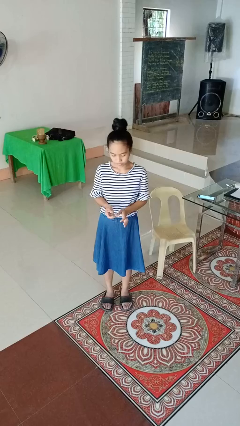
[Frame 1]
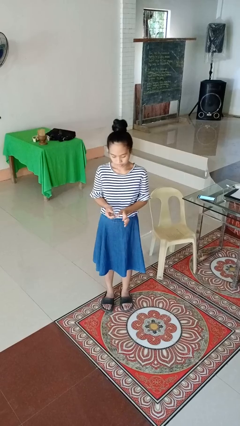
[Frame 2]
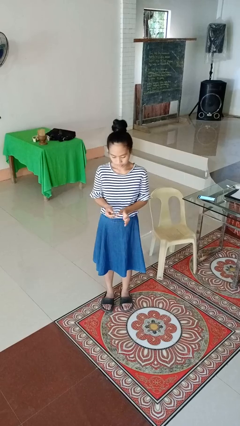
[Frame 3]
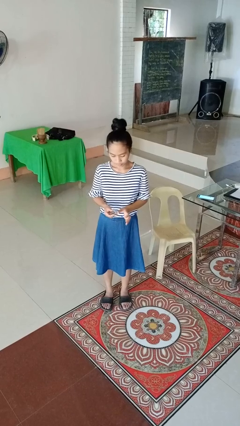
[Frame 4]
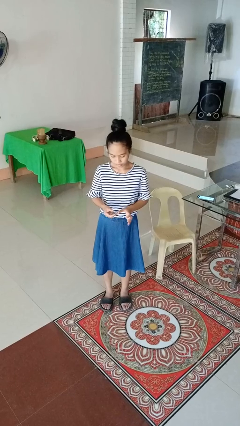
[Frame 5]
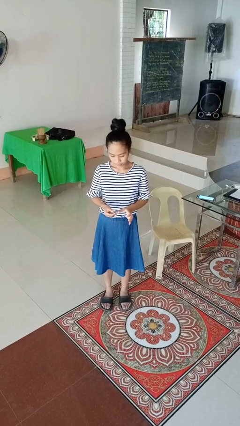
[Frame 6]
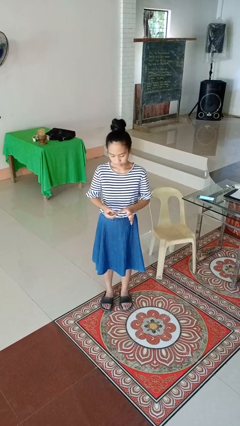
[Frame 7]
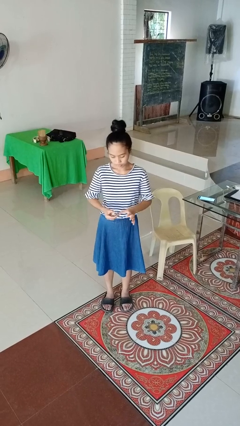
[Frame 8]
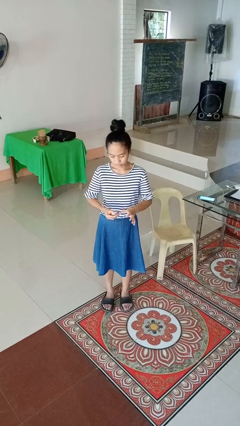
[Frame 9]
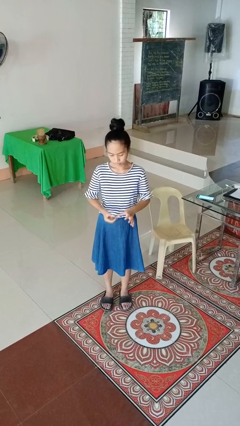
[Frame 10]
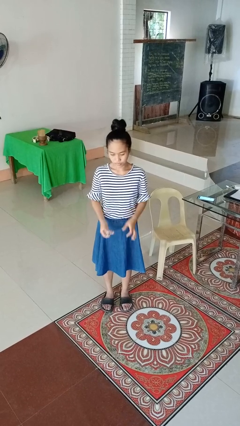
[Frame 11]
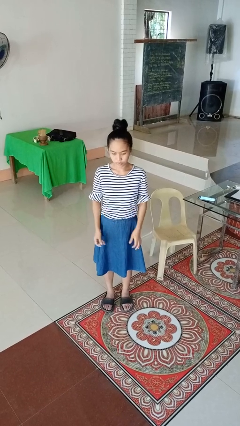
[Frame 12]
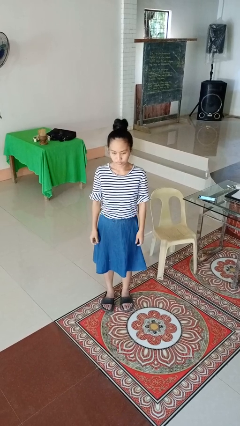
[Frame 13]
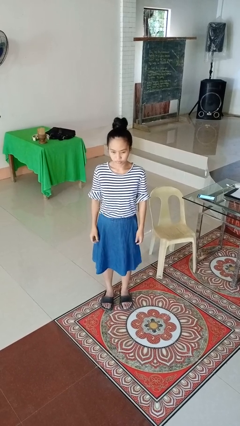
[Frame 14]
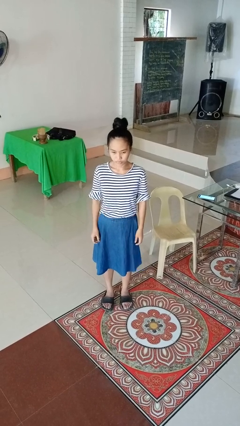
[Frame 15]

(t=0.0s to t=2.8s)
person clips fingernails

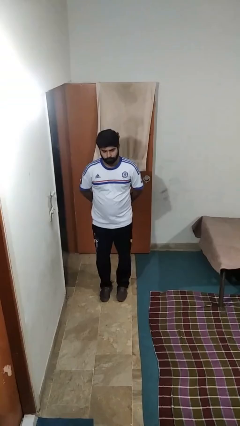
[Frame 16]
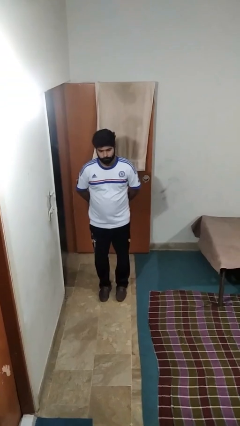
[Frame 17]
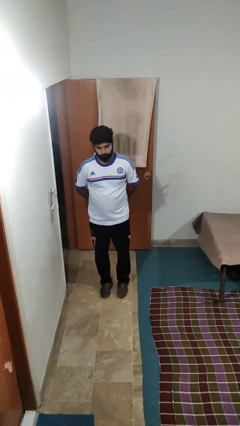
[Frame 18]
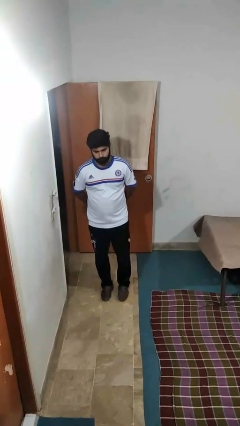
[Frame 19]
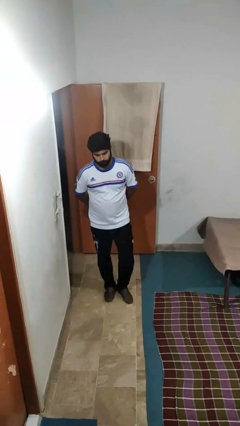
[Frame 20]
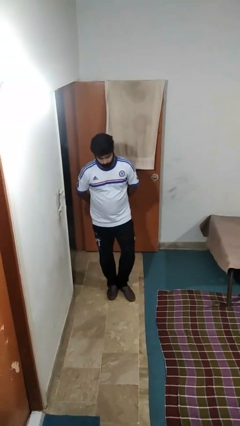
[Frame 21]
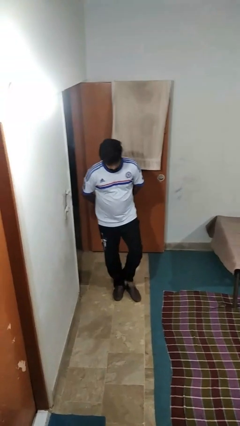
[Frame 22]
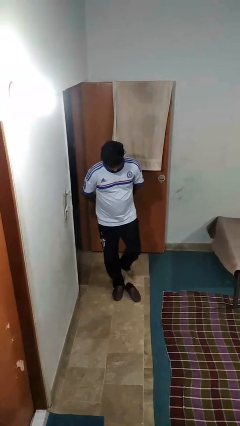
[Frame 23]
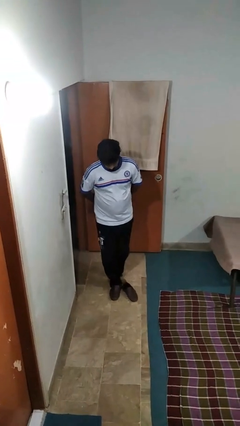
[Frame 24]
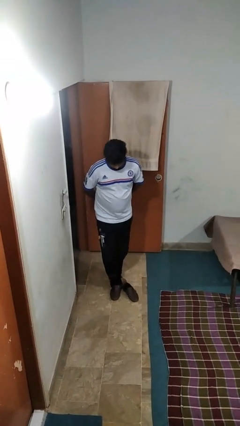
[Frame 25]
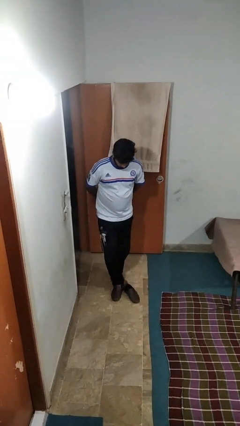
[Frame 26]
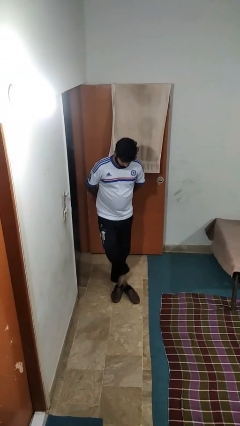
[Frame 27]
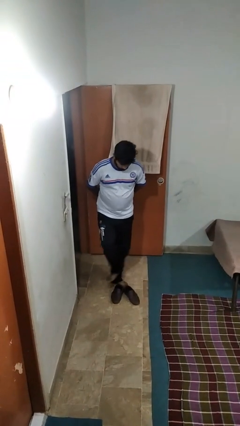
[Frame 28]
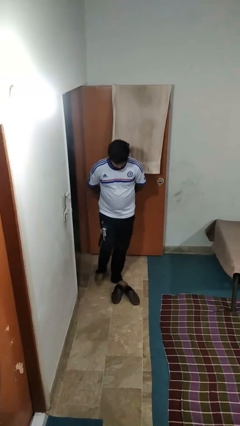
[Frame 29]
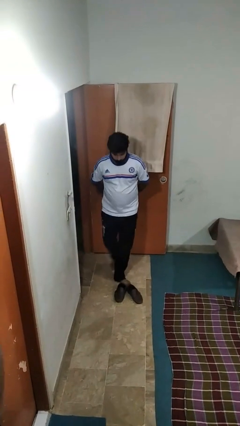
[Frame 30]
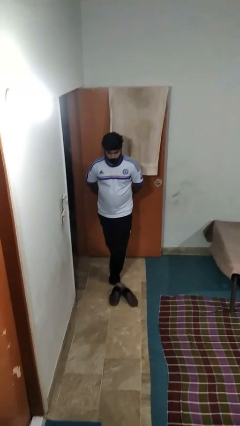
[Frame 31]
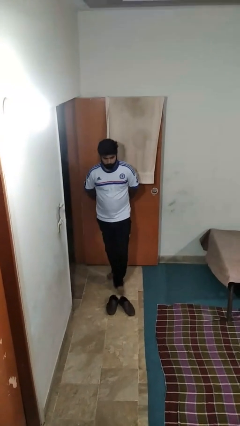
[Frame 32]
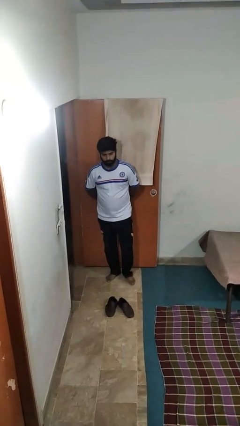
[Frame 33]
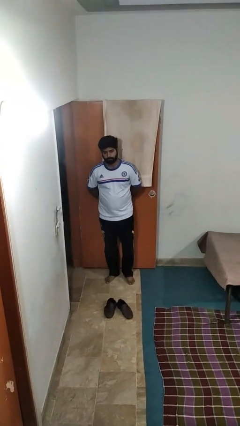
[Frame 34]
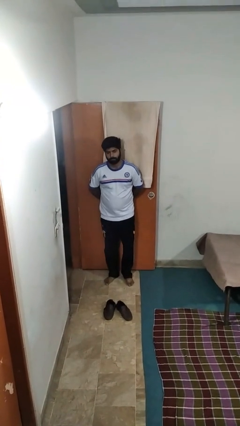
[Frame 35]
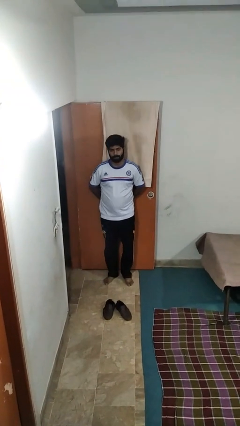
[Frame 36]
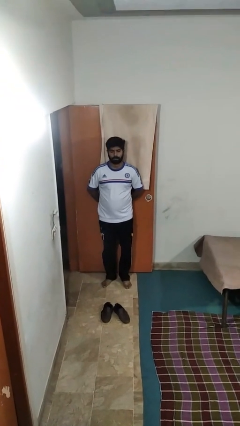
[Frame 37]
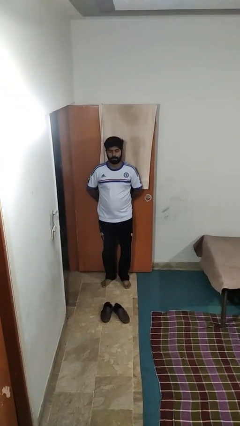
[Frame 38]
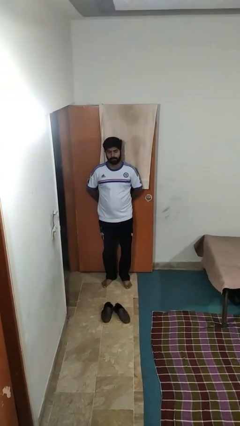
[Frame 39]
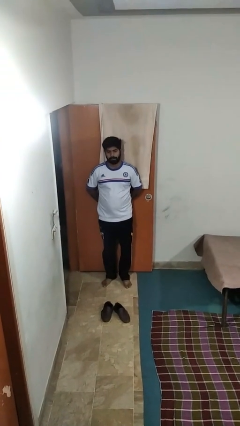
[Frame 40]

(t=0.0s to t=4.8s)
person takes off shoes

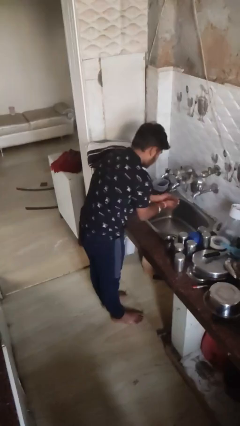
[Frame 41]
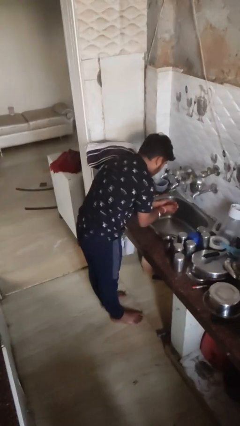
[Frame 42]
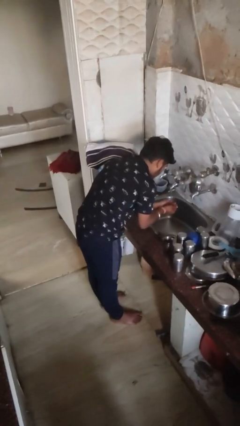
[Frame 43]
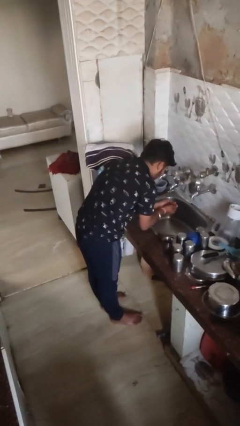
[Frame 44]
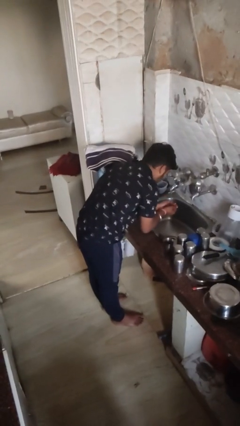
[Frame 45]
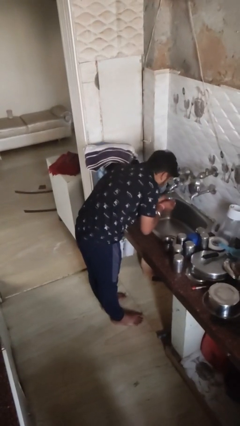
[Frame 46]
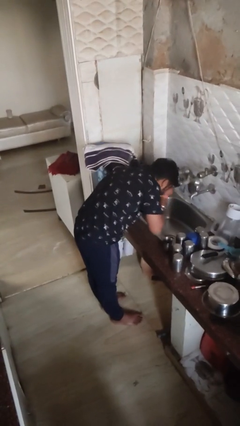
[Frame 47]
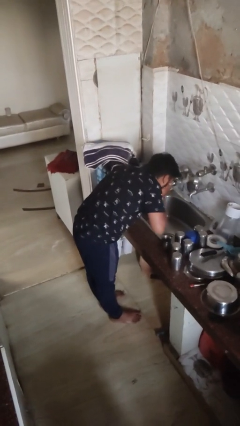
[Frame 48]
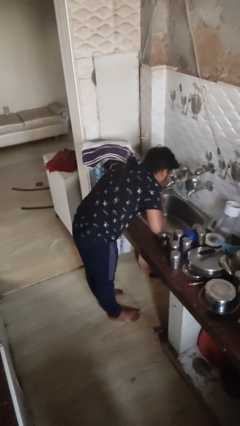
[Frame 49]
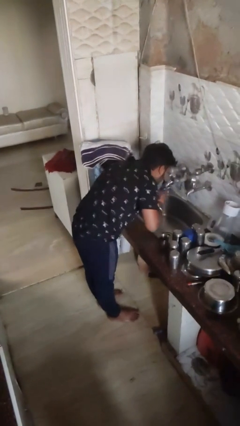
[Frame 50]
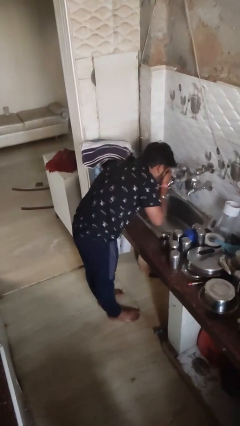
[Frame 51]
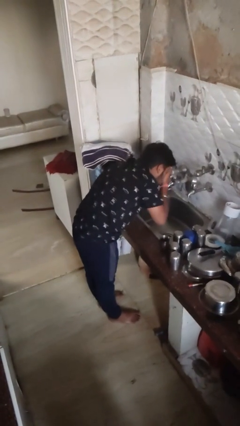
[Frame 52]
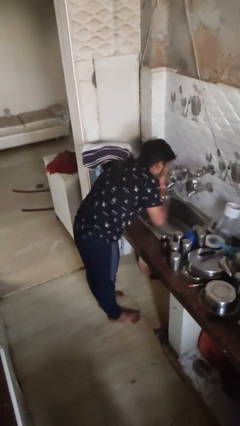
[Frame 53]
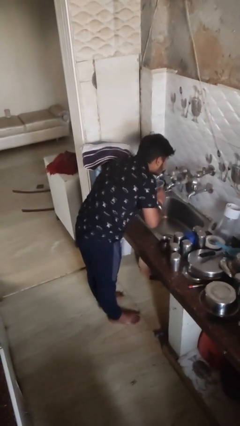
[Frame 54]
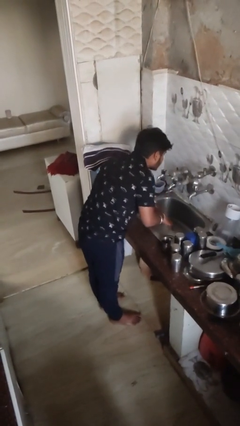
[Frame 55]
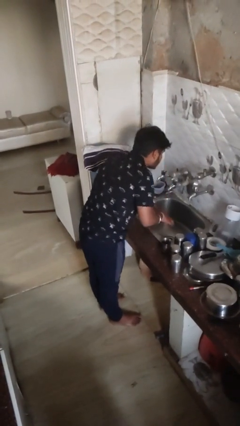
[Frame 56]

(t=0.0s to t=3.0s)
person washes face

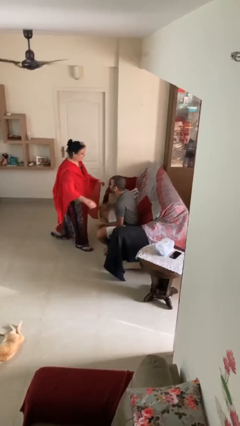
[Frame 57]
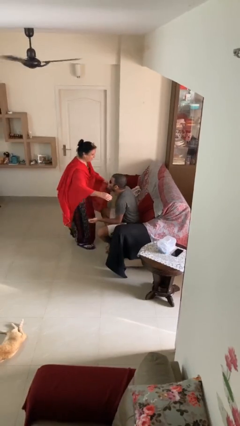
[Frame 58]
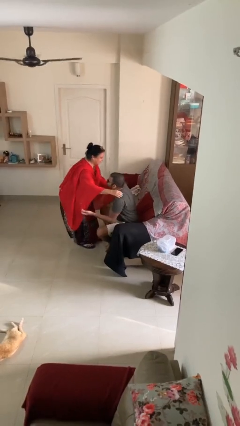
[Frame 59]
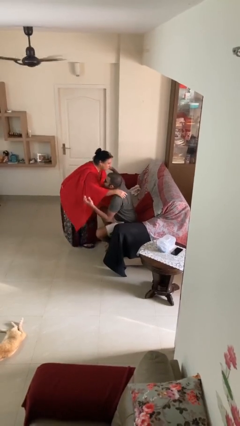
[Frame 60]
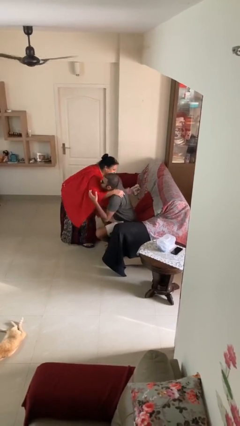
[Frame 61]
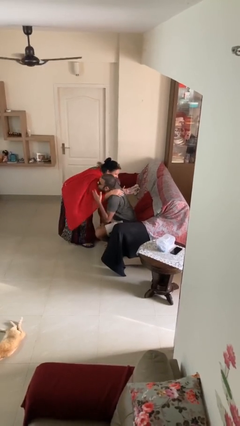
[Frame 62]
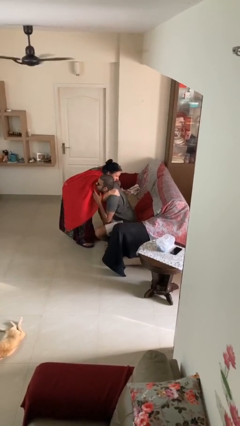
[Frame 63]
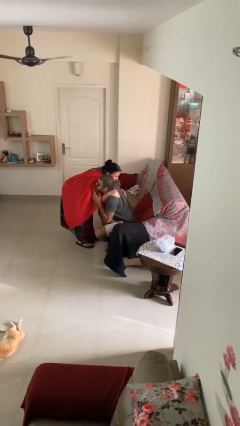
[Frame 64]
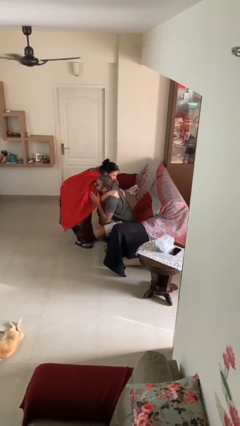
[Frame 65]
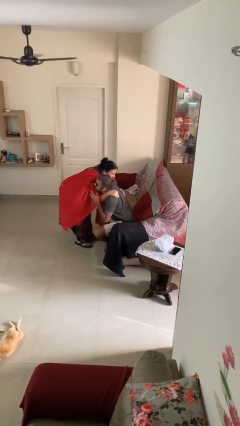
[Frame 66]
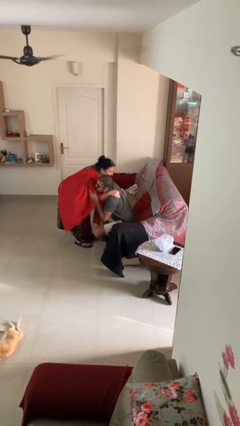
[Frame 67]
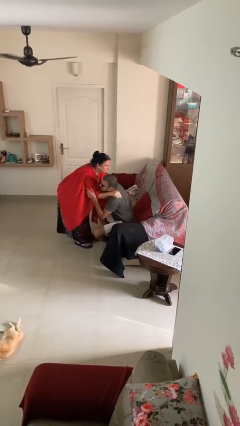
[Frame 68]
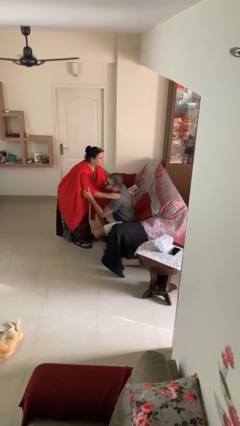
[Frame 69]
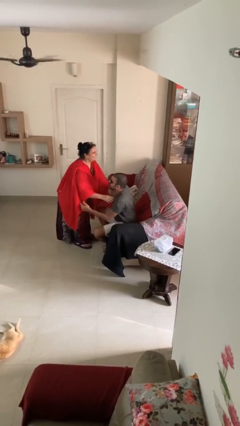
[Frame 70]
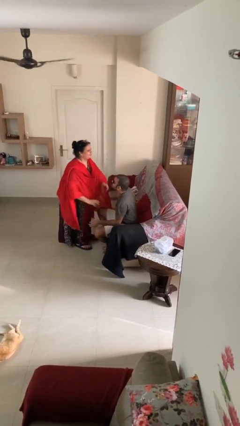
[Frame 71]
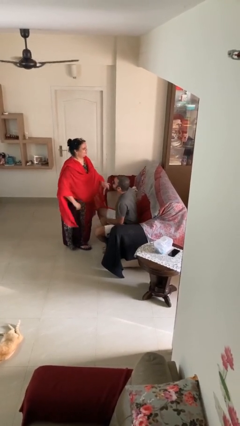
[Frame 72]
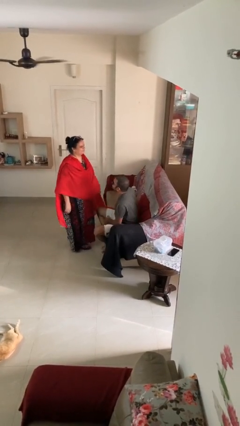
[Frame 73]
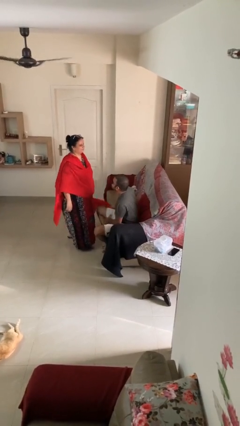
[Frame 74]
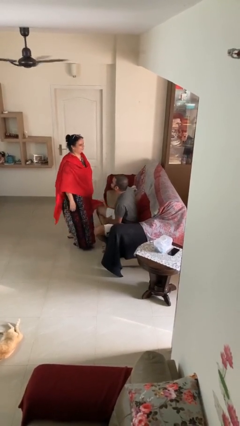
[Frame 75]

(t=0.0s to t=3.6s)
person embraces person

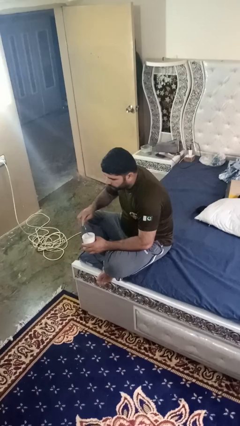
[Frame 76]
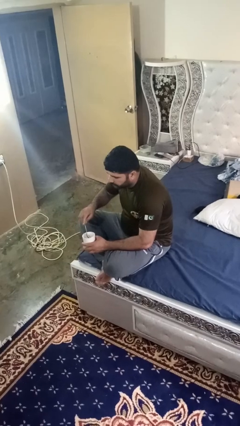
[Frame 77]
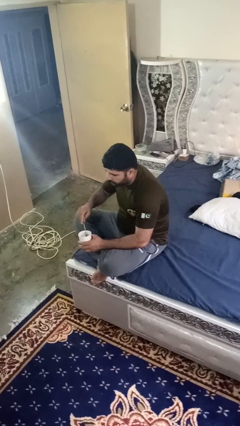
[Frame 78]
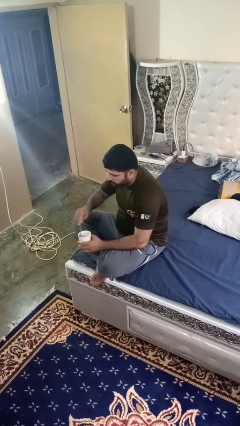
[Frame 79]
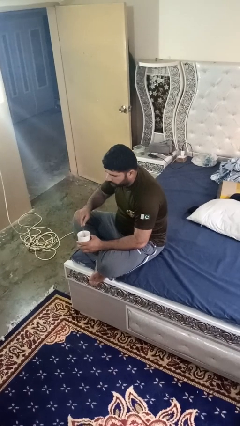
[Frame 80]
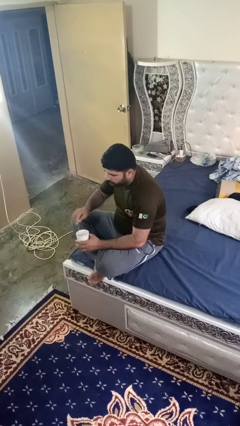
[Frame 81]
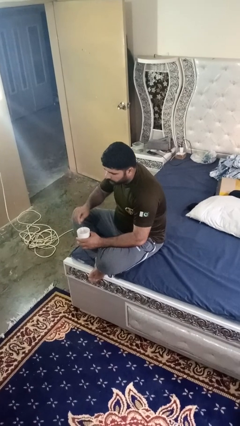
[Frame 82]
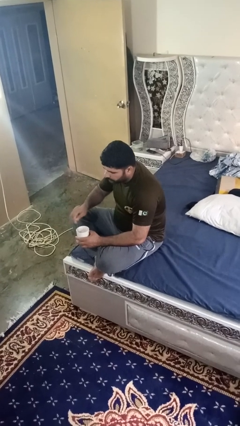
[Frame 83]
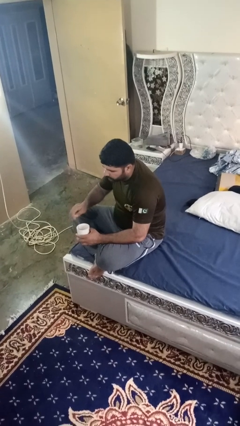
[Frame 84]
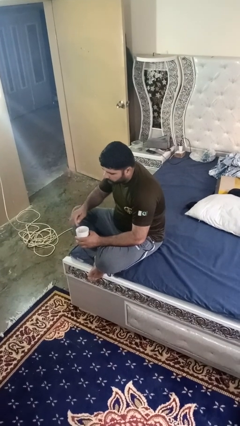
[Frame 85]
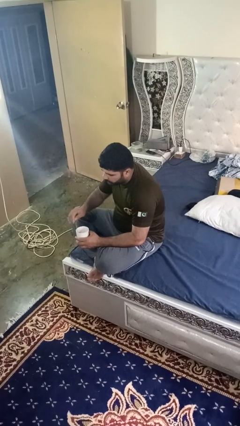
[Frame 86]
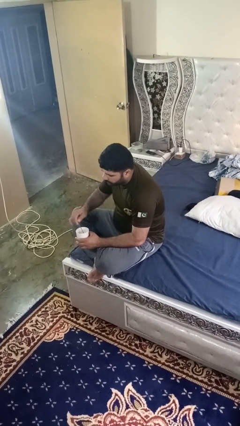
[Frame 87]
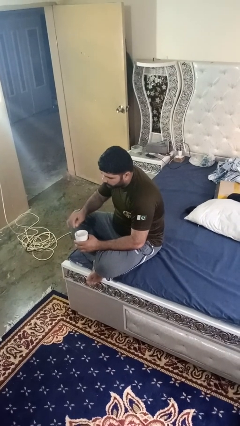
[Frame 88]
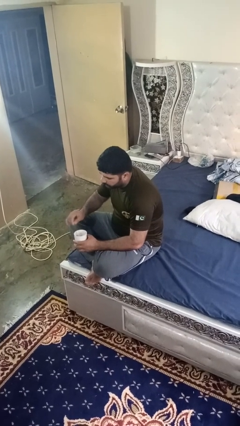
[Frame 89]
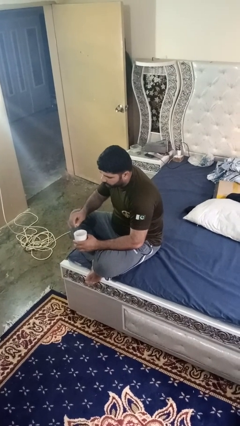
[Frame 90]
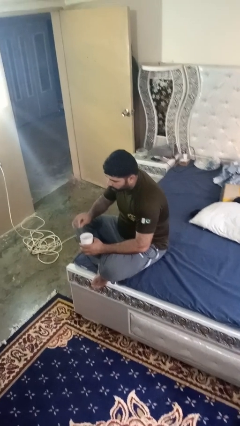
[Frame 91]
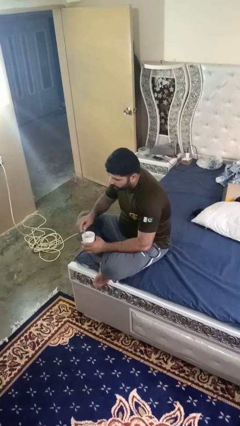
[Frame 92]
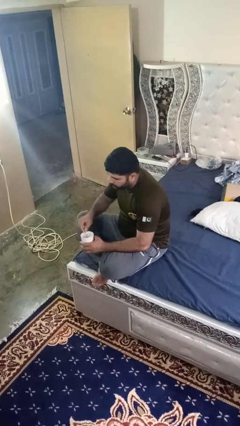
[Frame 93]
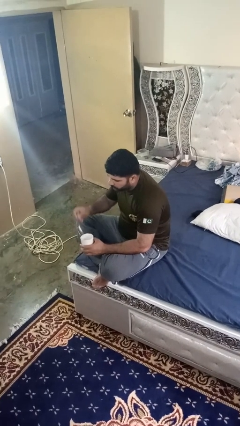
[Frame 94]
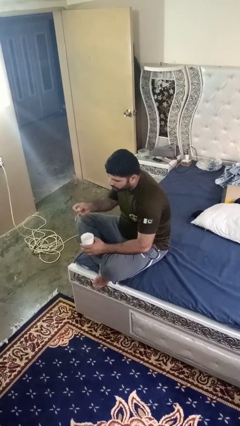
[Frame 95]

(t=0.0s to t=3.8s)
person stirs mug
